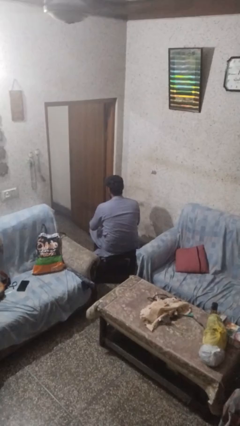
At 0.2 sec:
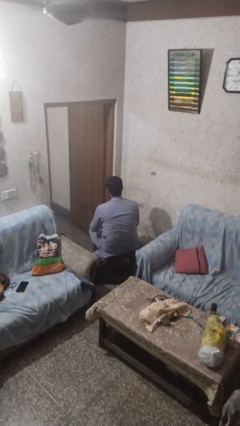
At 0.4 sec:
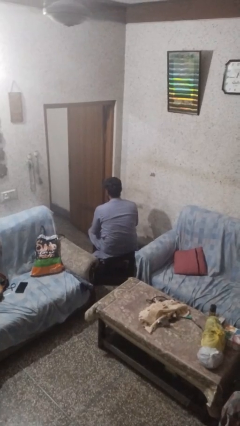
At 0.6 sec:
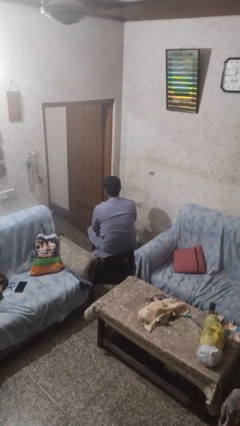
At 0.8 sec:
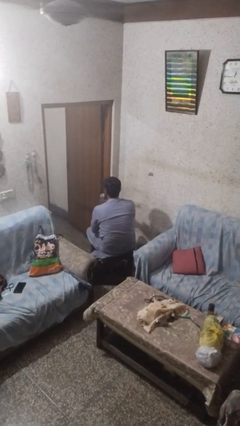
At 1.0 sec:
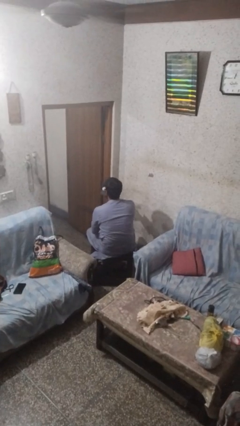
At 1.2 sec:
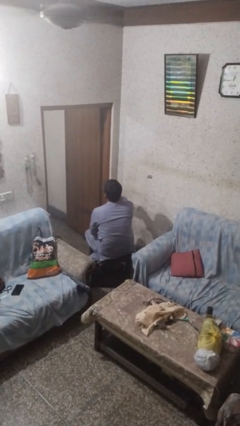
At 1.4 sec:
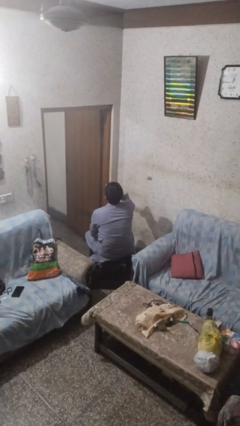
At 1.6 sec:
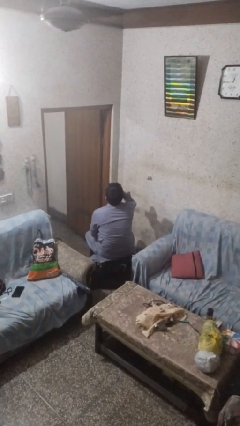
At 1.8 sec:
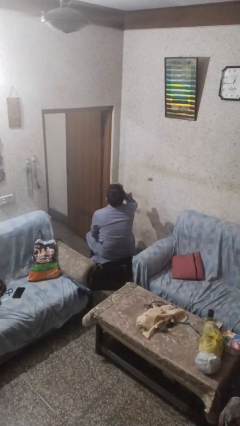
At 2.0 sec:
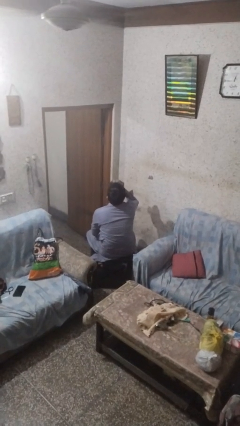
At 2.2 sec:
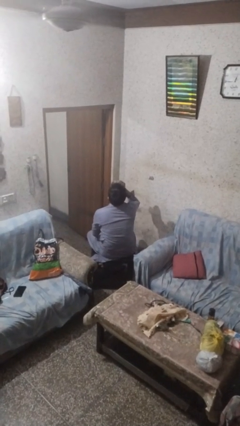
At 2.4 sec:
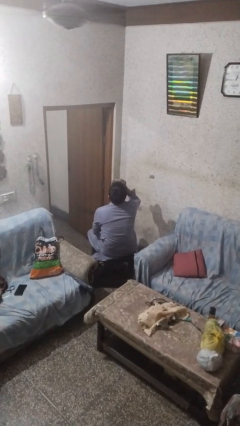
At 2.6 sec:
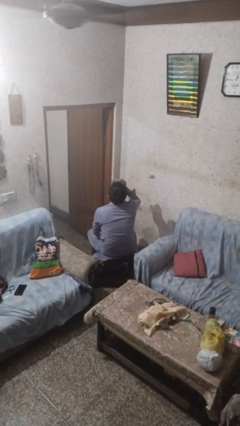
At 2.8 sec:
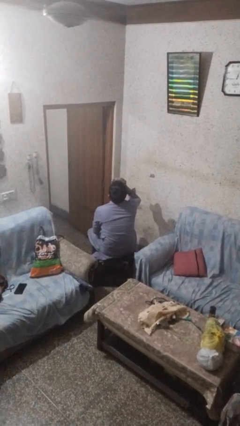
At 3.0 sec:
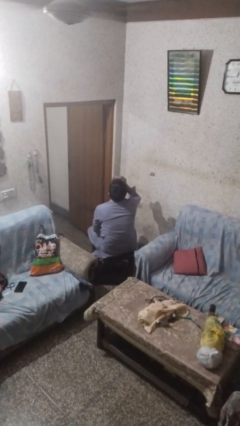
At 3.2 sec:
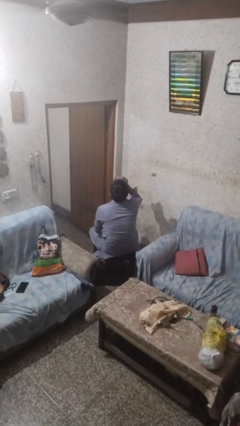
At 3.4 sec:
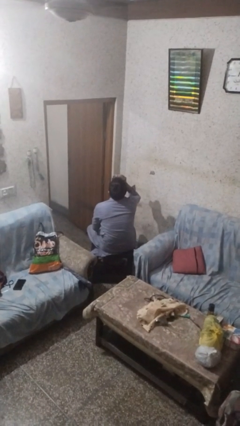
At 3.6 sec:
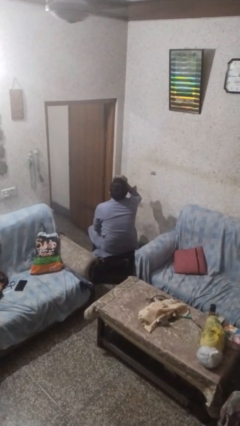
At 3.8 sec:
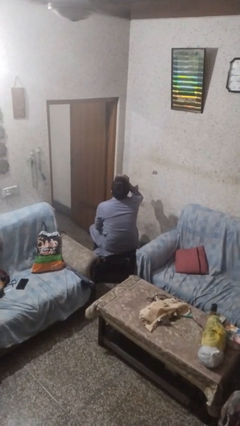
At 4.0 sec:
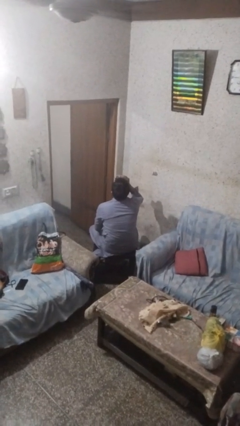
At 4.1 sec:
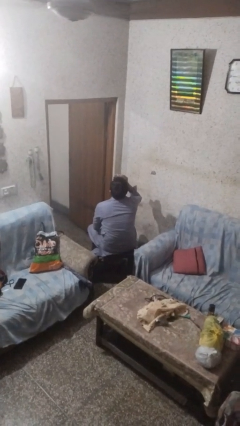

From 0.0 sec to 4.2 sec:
person drinks from beverage can

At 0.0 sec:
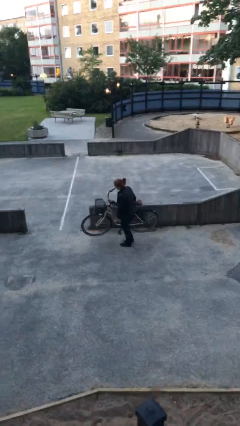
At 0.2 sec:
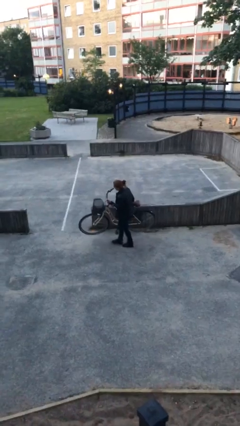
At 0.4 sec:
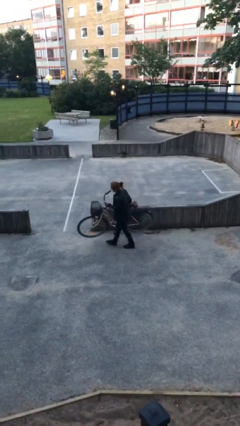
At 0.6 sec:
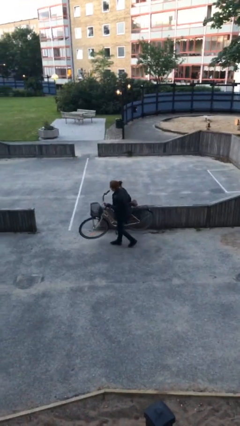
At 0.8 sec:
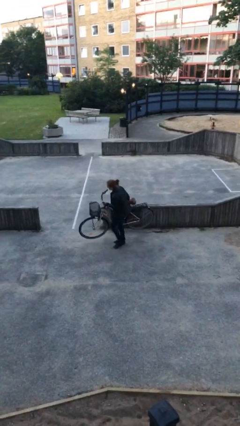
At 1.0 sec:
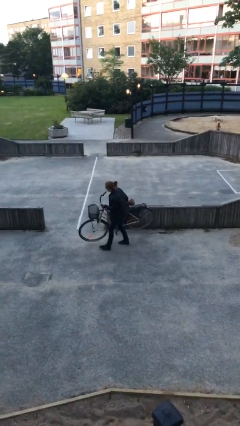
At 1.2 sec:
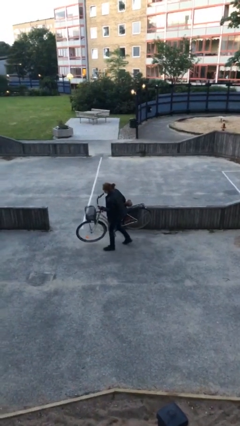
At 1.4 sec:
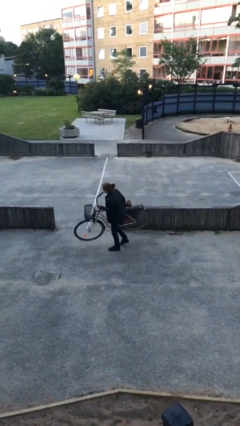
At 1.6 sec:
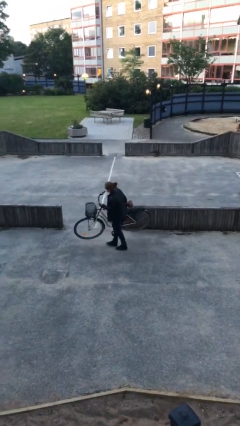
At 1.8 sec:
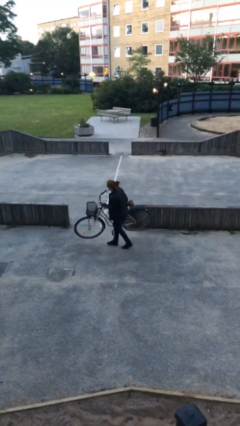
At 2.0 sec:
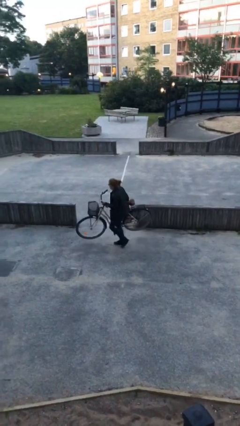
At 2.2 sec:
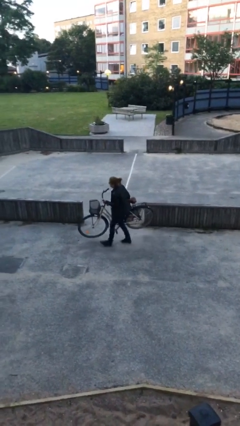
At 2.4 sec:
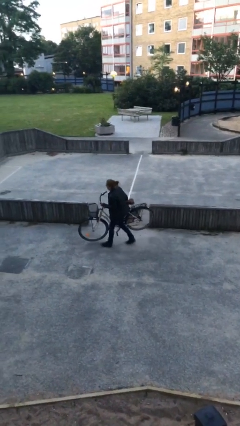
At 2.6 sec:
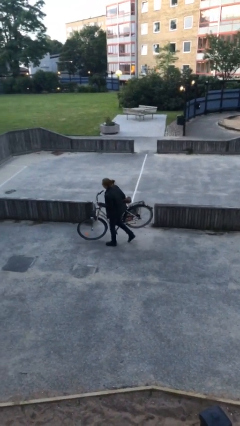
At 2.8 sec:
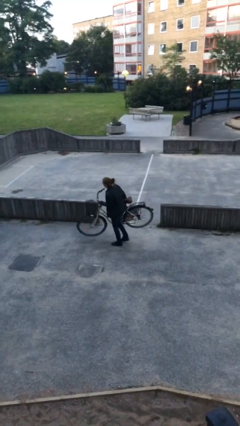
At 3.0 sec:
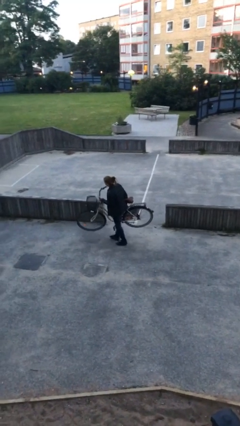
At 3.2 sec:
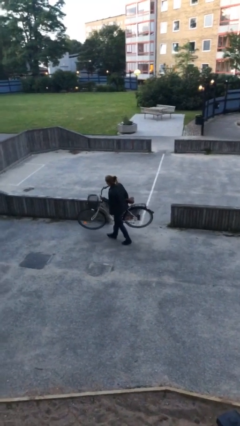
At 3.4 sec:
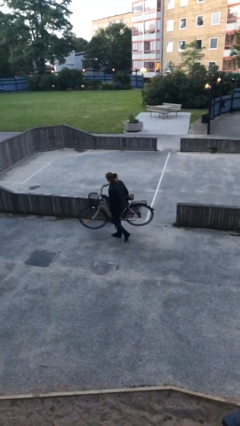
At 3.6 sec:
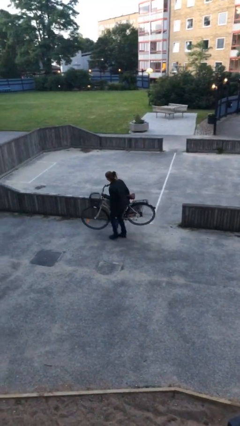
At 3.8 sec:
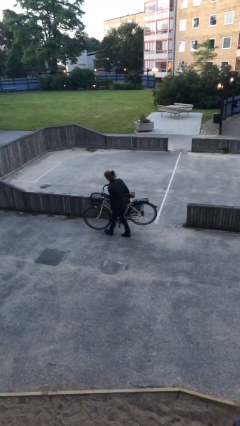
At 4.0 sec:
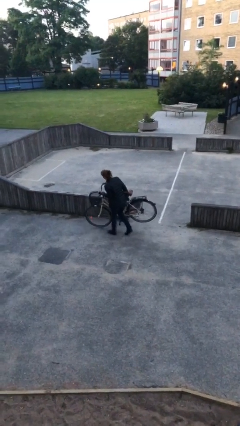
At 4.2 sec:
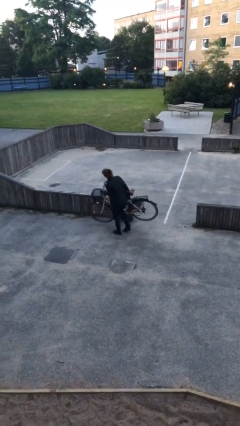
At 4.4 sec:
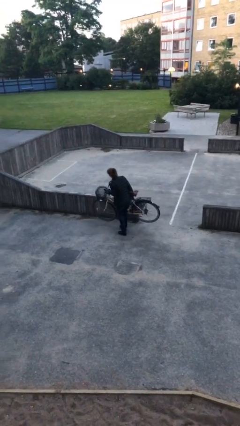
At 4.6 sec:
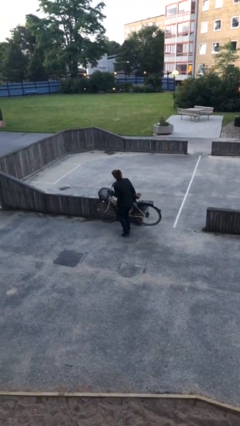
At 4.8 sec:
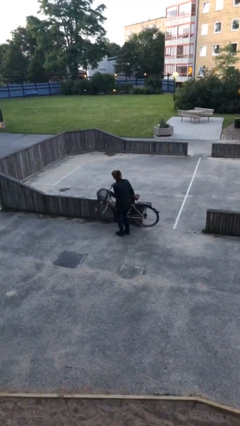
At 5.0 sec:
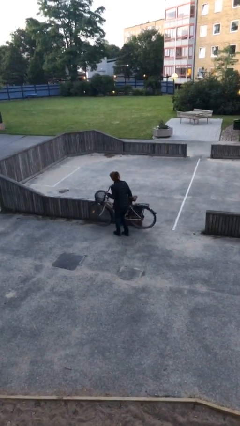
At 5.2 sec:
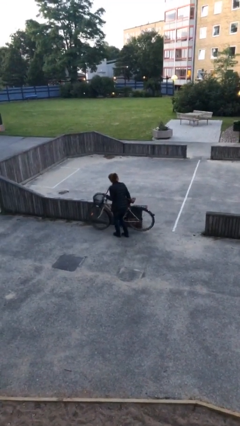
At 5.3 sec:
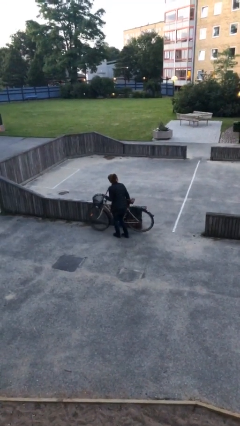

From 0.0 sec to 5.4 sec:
person carries heavy object

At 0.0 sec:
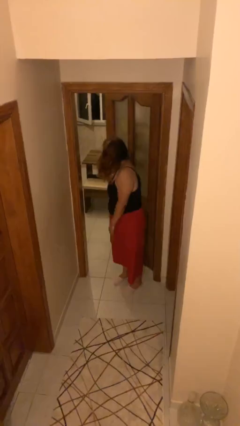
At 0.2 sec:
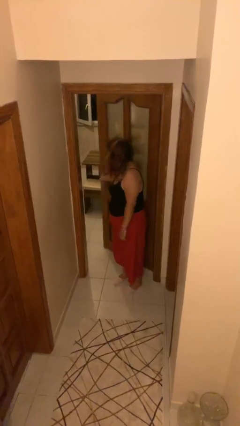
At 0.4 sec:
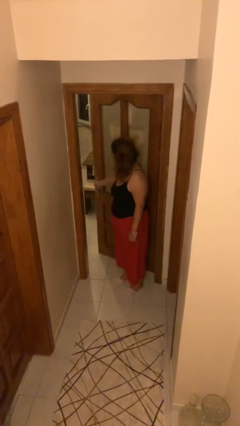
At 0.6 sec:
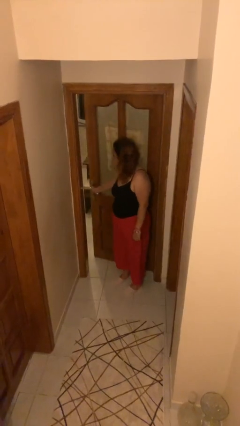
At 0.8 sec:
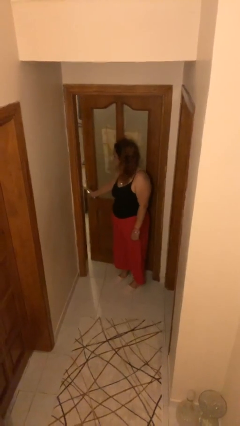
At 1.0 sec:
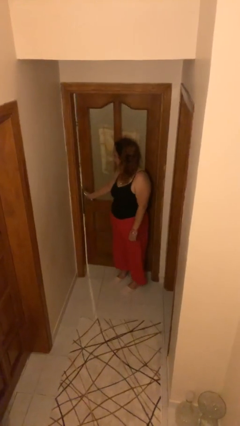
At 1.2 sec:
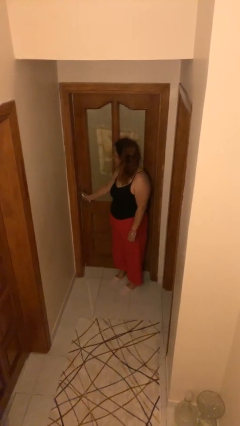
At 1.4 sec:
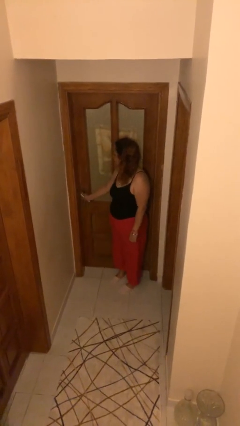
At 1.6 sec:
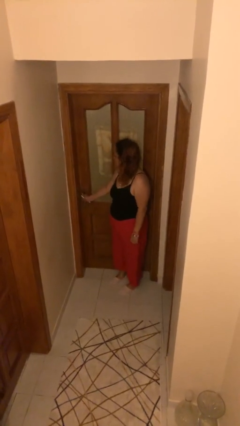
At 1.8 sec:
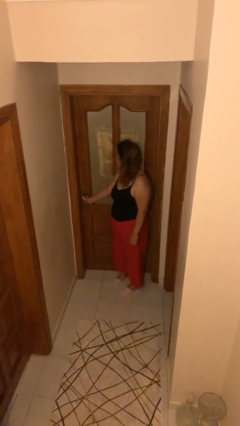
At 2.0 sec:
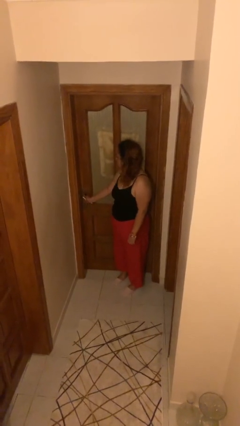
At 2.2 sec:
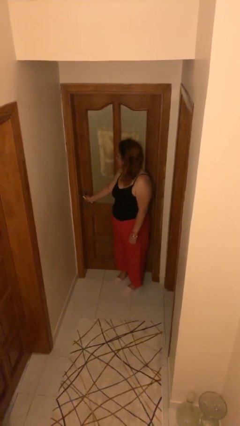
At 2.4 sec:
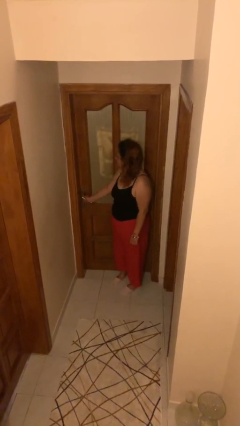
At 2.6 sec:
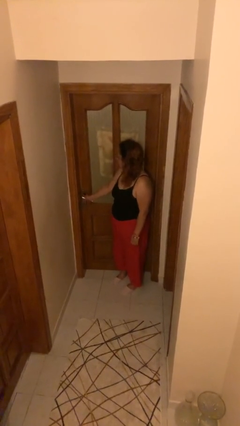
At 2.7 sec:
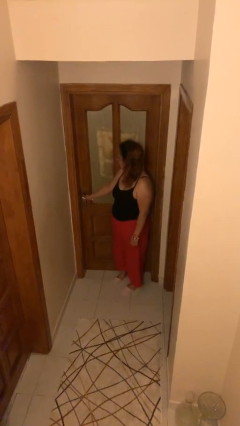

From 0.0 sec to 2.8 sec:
person closes facility door

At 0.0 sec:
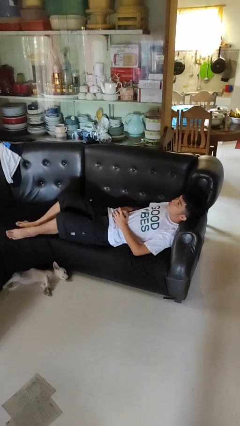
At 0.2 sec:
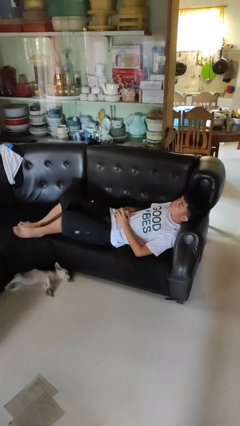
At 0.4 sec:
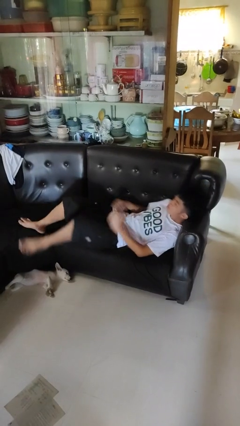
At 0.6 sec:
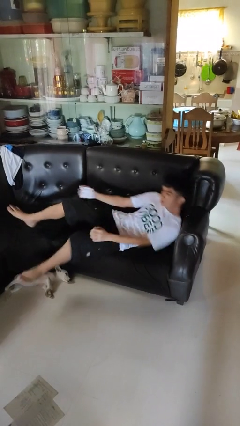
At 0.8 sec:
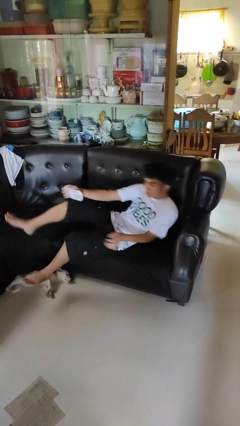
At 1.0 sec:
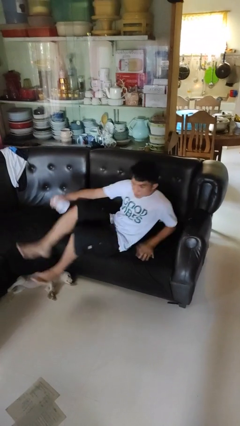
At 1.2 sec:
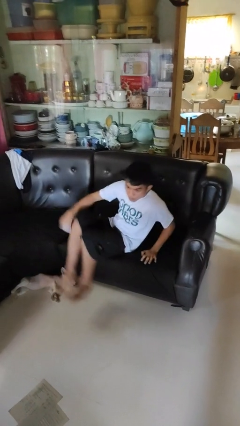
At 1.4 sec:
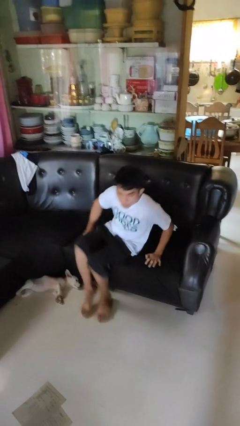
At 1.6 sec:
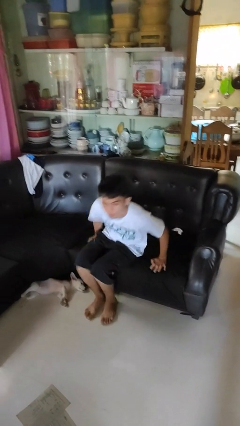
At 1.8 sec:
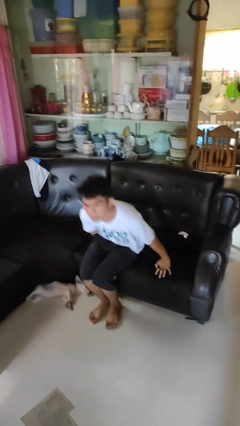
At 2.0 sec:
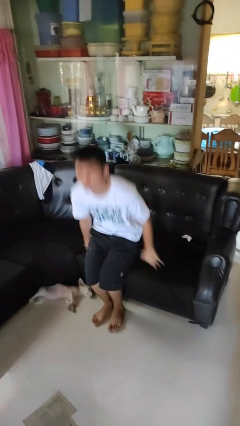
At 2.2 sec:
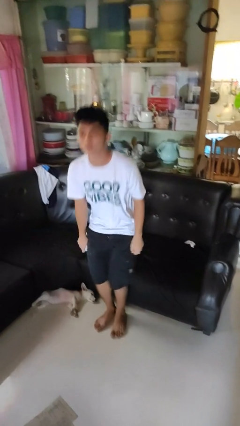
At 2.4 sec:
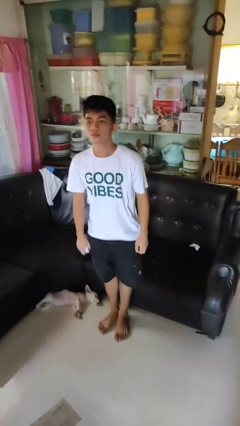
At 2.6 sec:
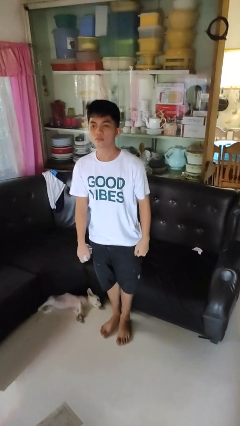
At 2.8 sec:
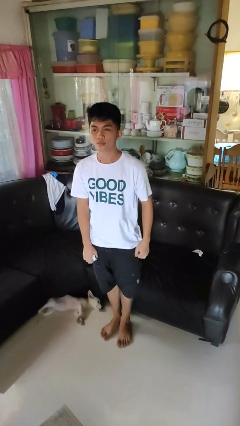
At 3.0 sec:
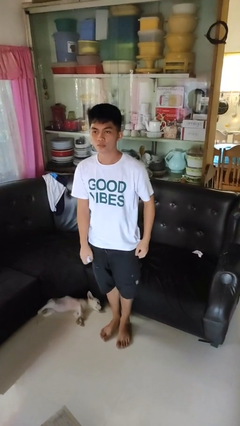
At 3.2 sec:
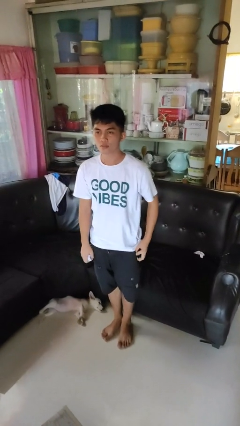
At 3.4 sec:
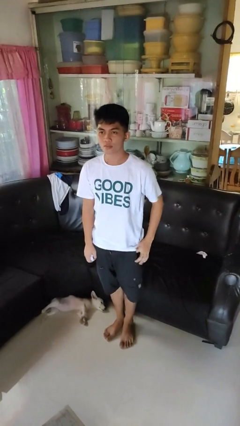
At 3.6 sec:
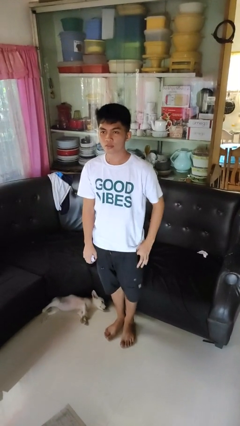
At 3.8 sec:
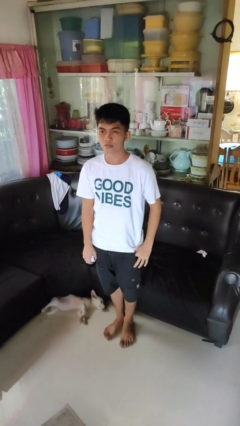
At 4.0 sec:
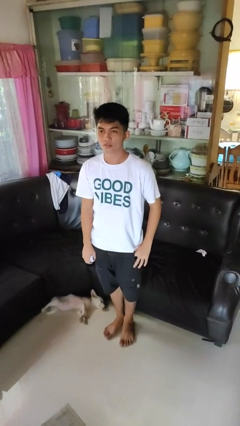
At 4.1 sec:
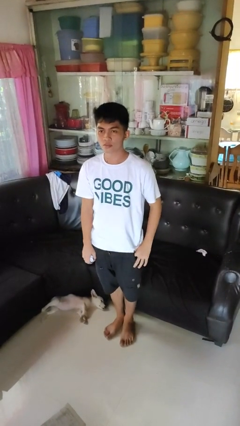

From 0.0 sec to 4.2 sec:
person stands up

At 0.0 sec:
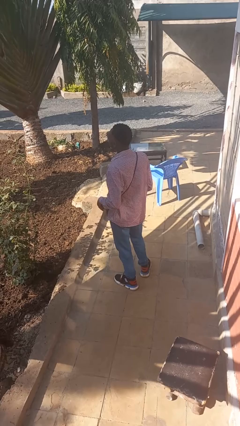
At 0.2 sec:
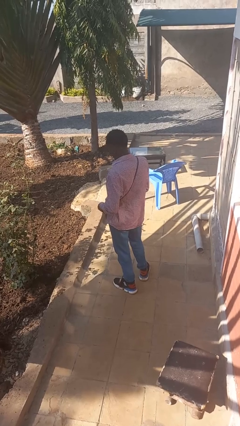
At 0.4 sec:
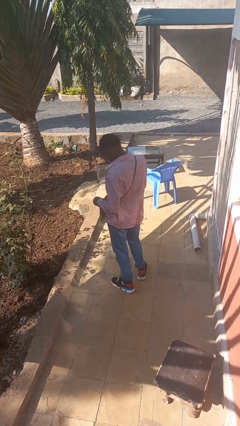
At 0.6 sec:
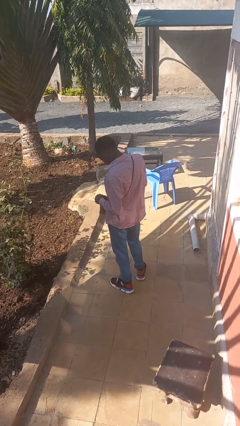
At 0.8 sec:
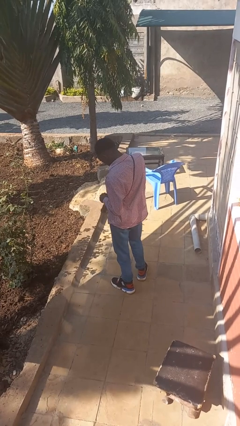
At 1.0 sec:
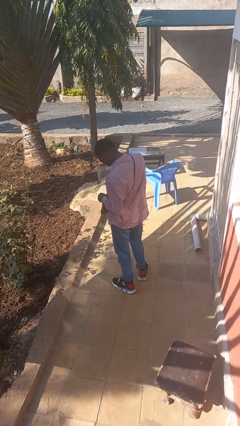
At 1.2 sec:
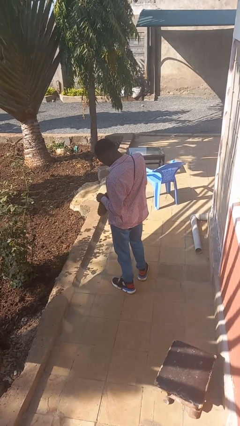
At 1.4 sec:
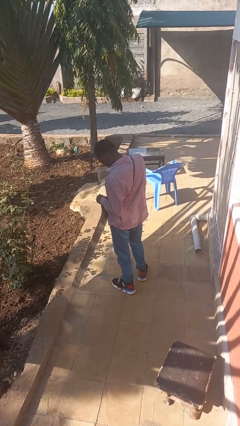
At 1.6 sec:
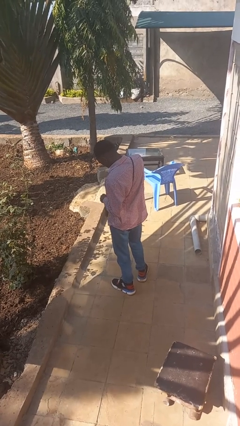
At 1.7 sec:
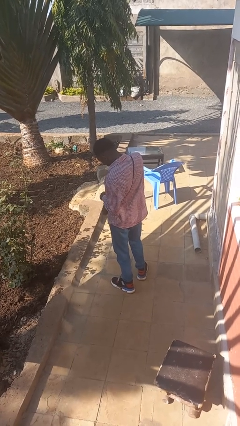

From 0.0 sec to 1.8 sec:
person searches in purse
